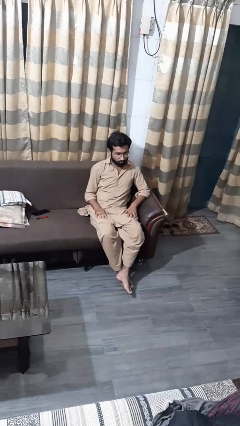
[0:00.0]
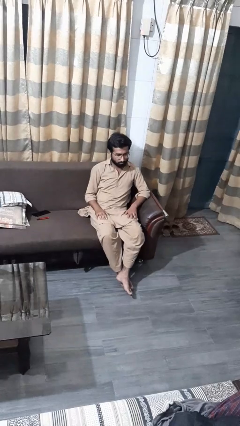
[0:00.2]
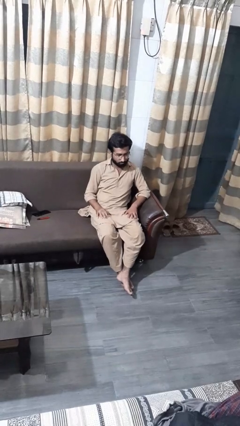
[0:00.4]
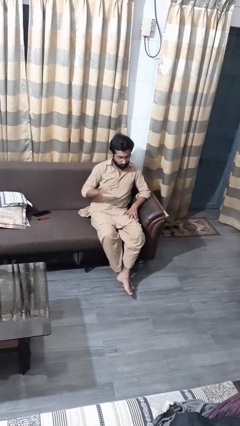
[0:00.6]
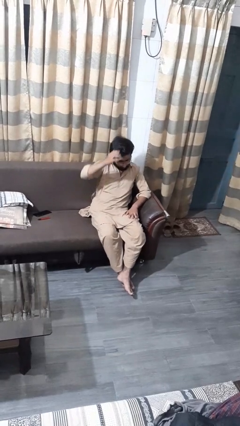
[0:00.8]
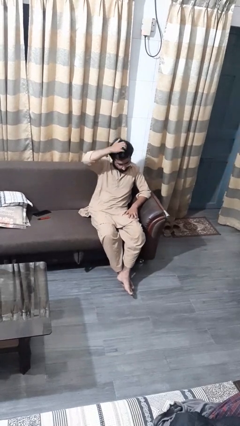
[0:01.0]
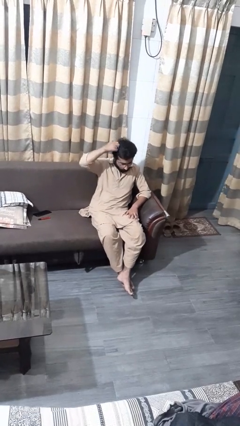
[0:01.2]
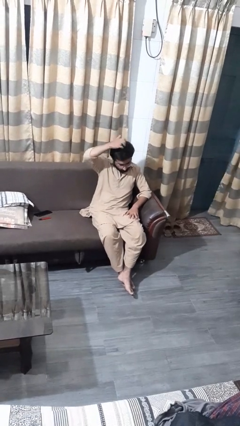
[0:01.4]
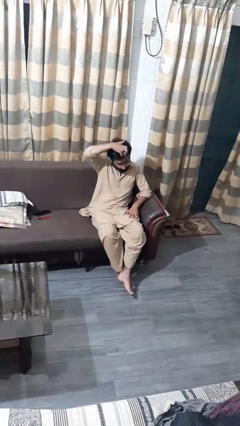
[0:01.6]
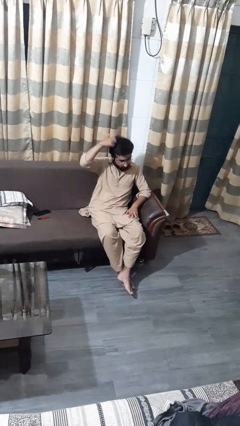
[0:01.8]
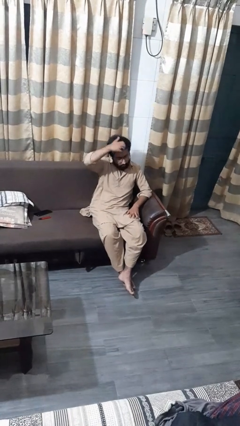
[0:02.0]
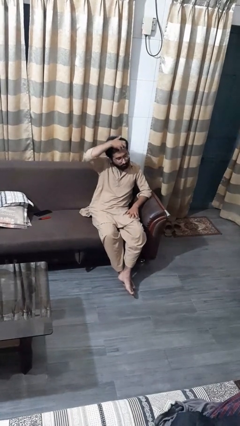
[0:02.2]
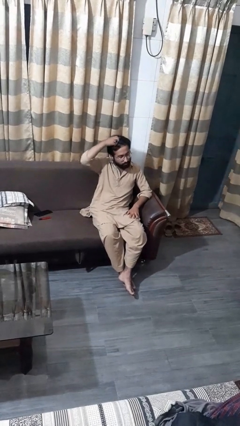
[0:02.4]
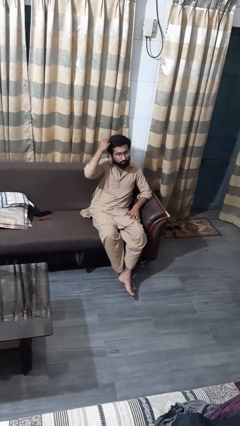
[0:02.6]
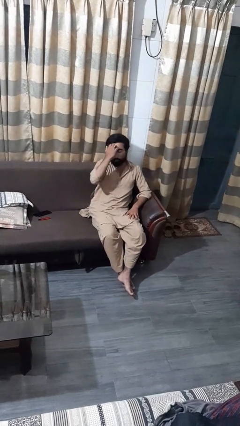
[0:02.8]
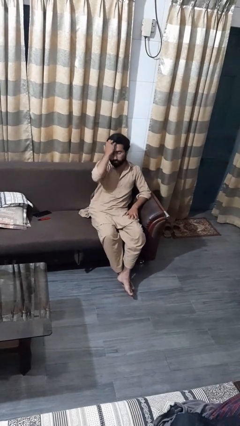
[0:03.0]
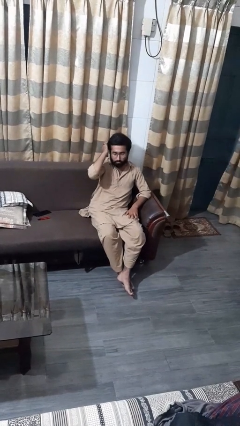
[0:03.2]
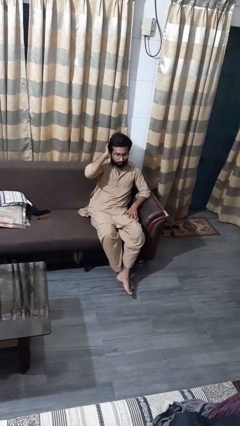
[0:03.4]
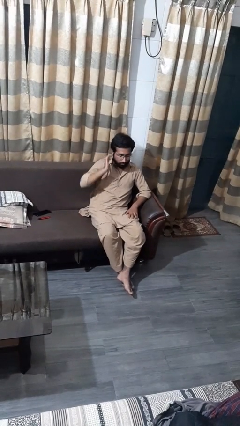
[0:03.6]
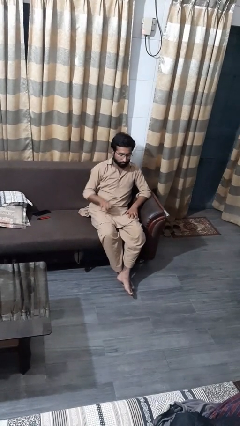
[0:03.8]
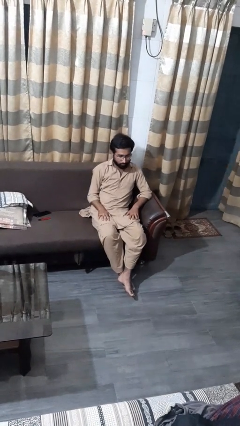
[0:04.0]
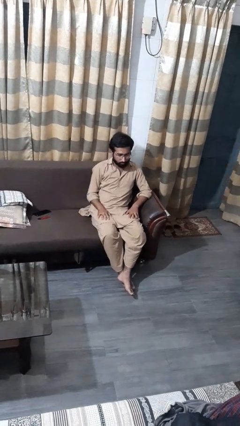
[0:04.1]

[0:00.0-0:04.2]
person strokes hair

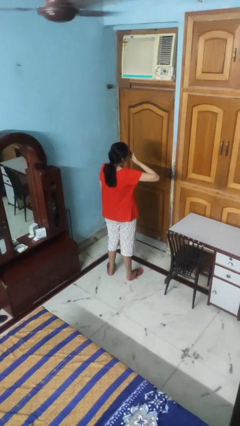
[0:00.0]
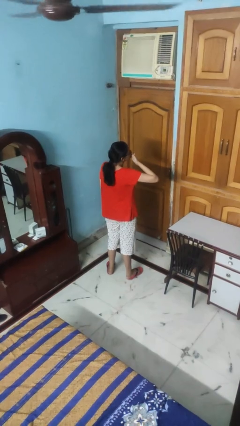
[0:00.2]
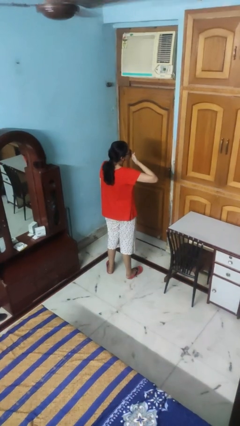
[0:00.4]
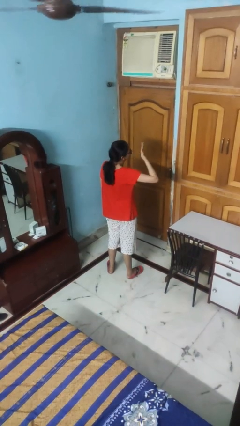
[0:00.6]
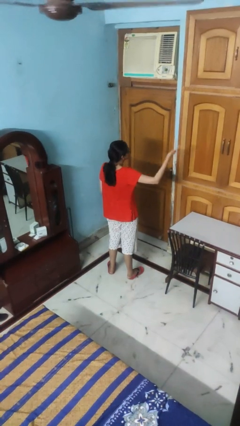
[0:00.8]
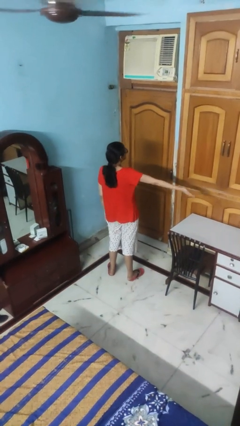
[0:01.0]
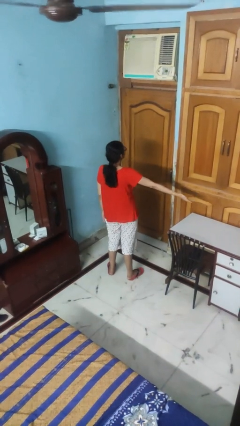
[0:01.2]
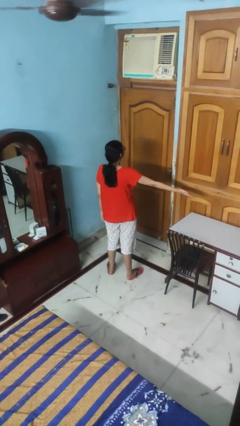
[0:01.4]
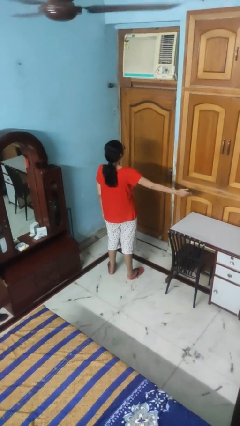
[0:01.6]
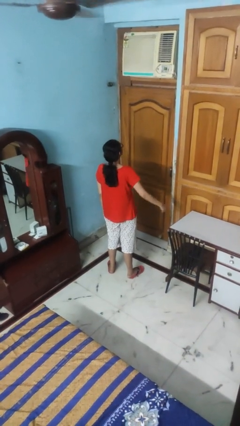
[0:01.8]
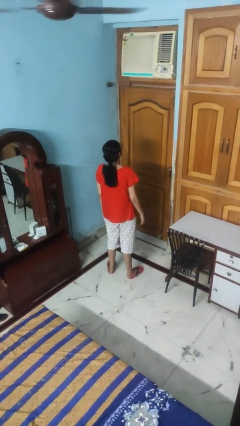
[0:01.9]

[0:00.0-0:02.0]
person gestures blow kiss

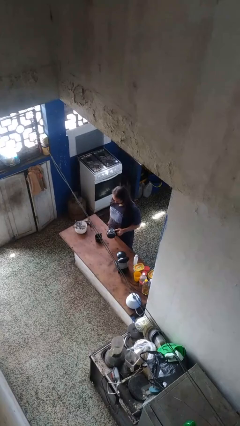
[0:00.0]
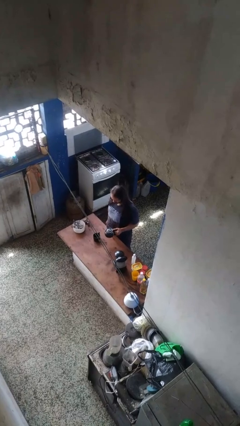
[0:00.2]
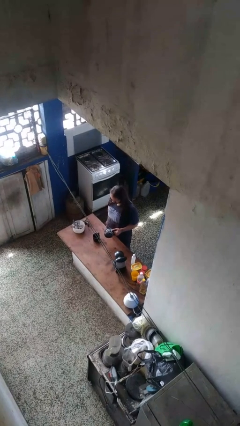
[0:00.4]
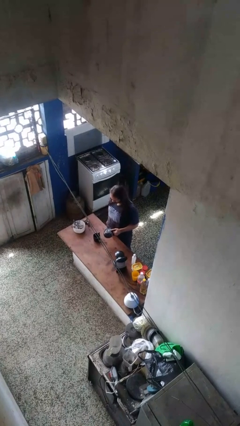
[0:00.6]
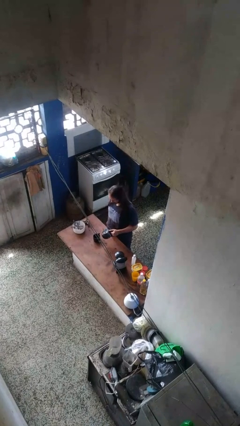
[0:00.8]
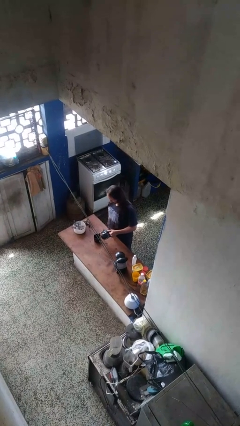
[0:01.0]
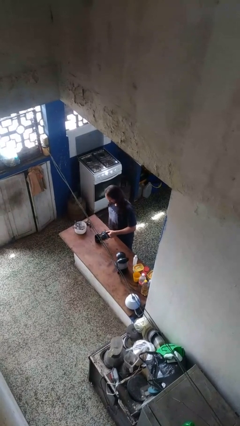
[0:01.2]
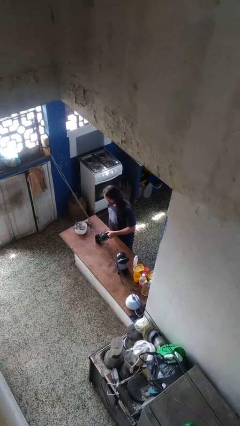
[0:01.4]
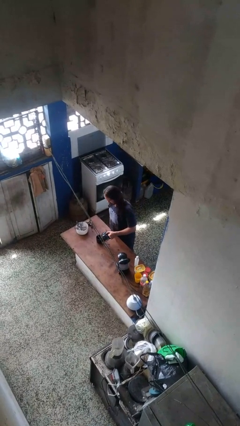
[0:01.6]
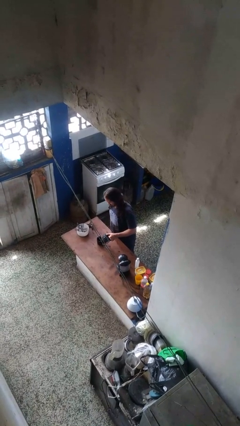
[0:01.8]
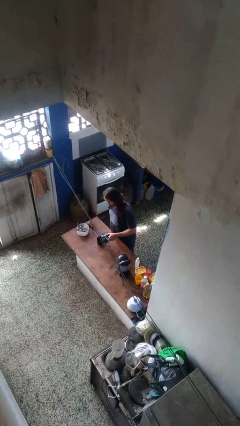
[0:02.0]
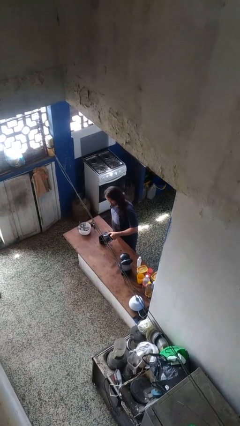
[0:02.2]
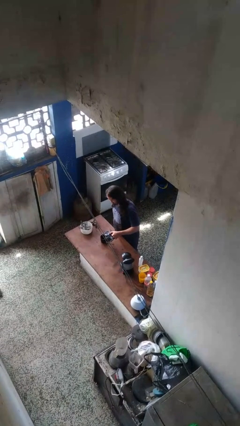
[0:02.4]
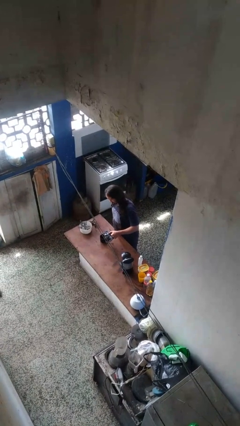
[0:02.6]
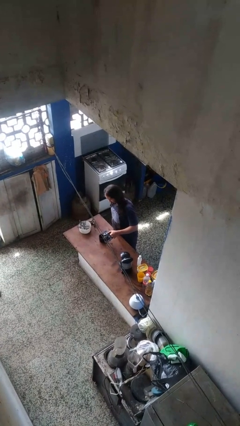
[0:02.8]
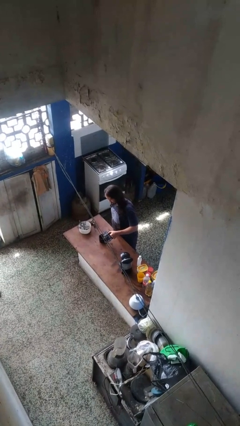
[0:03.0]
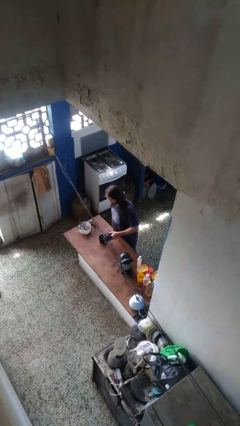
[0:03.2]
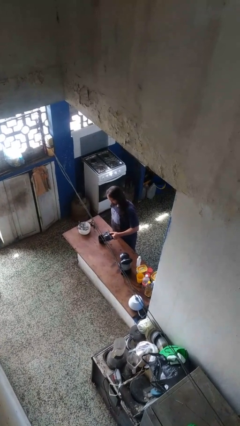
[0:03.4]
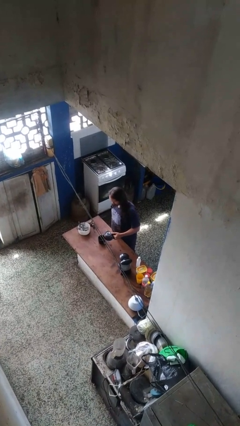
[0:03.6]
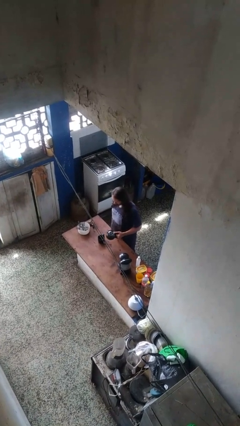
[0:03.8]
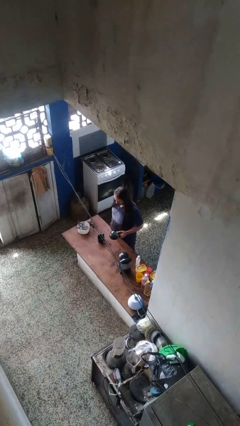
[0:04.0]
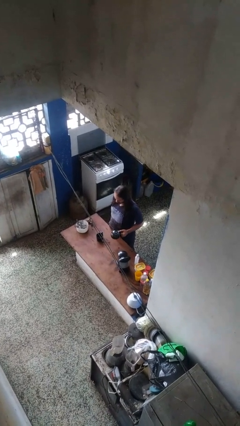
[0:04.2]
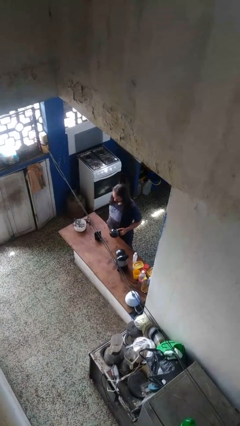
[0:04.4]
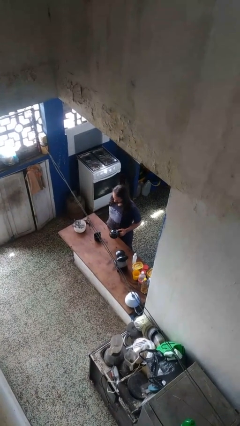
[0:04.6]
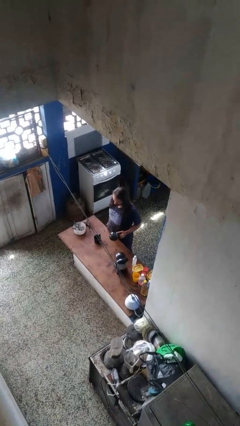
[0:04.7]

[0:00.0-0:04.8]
person pours coffee into mug

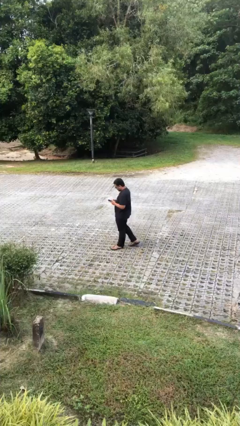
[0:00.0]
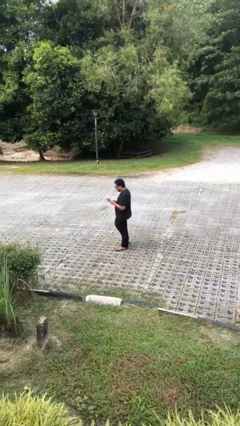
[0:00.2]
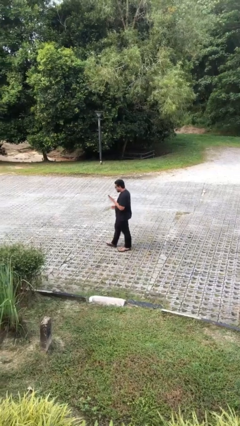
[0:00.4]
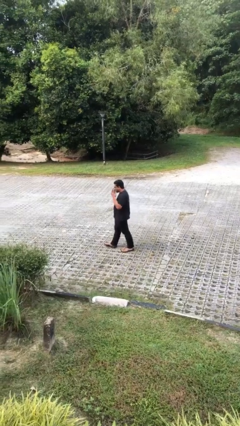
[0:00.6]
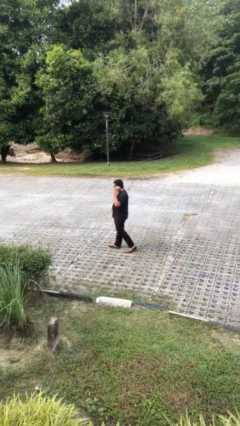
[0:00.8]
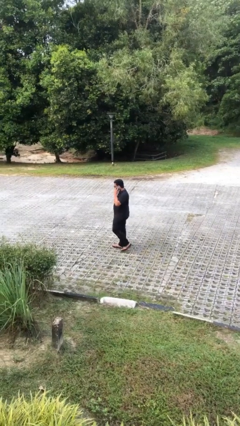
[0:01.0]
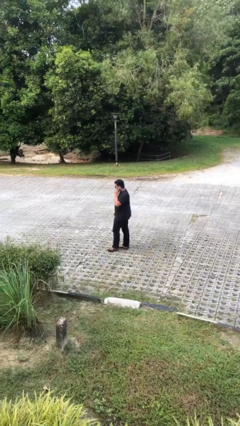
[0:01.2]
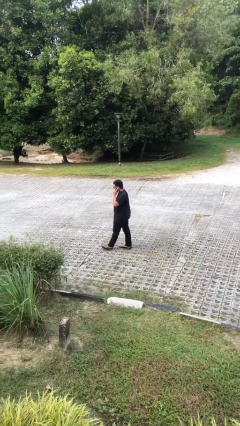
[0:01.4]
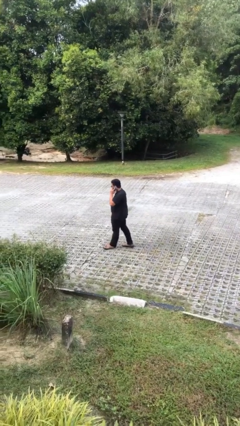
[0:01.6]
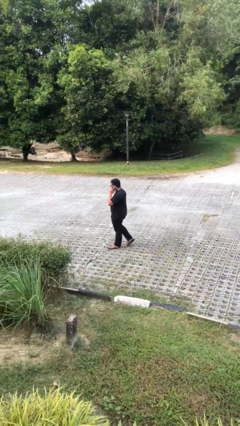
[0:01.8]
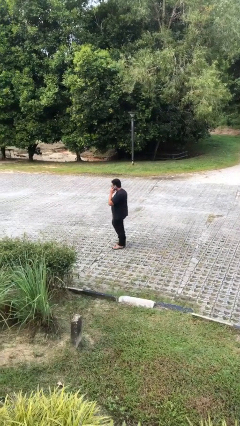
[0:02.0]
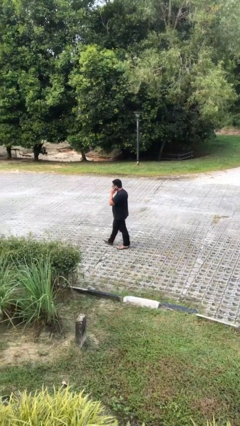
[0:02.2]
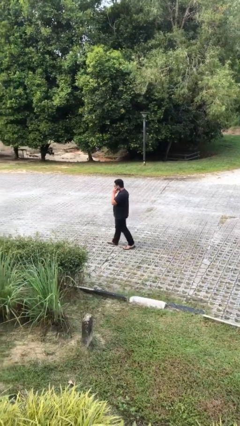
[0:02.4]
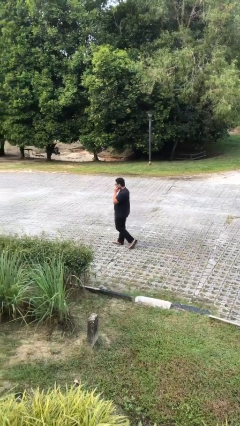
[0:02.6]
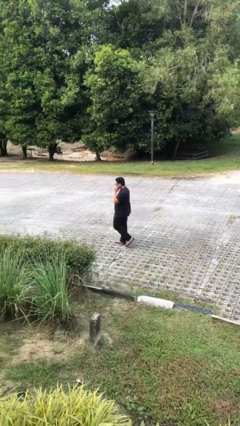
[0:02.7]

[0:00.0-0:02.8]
person talks on phone

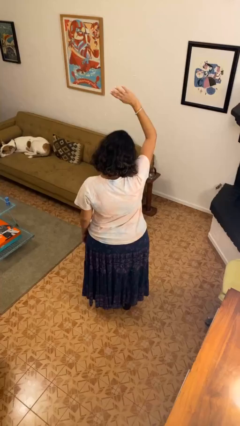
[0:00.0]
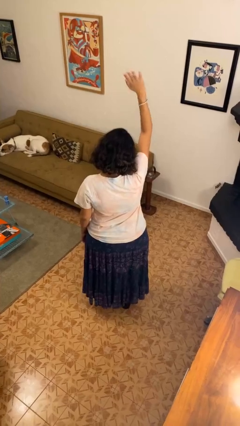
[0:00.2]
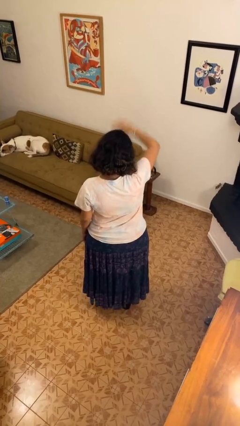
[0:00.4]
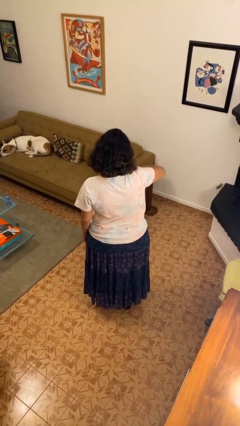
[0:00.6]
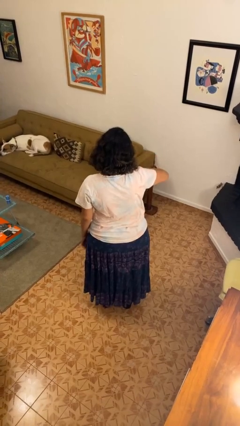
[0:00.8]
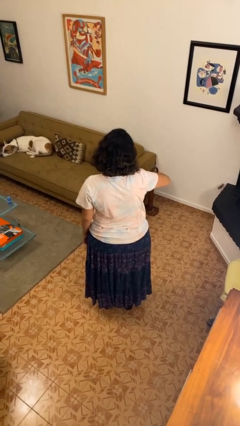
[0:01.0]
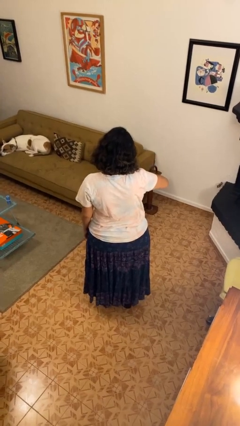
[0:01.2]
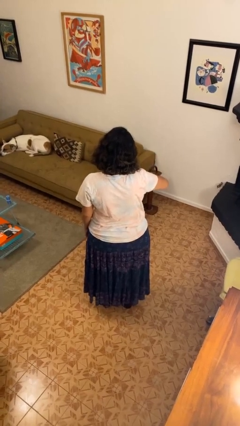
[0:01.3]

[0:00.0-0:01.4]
person gestures swipe down

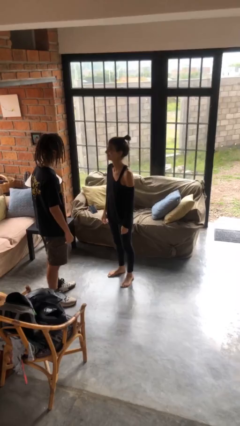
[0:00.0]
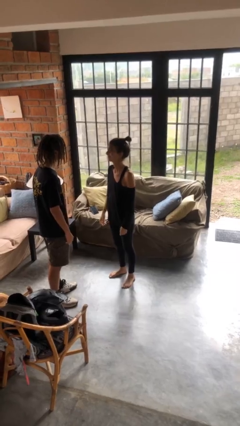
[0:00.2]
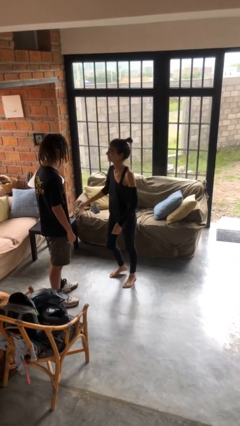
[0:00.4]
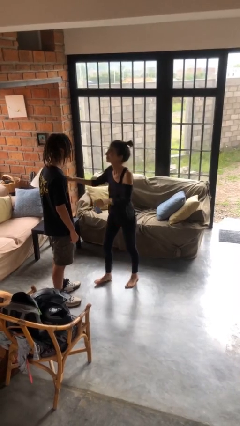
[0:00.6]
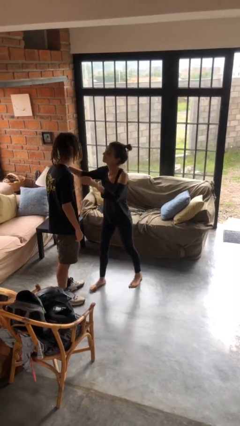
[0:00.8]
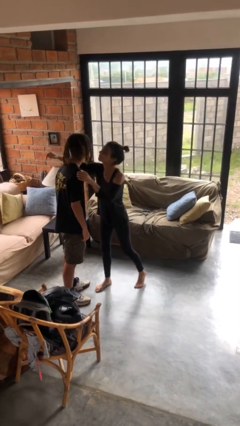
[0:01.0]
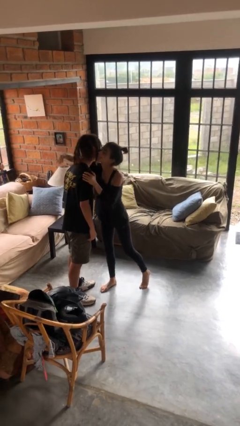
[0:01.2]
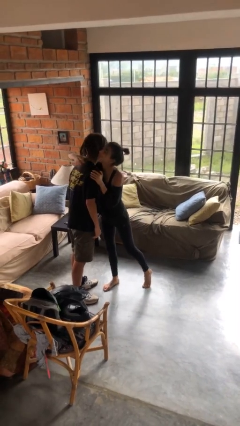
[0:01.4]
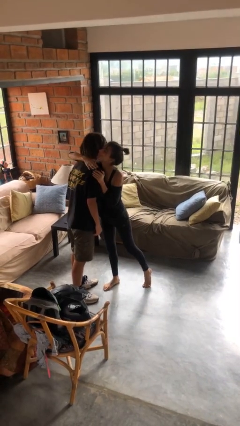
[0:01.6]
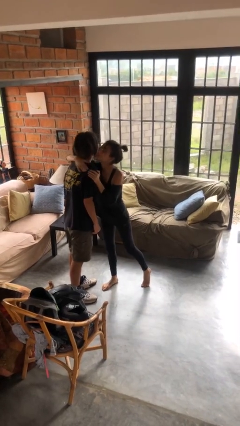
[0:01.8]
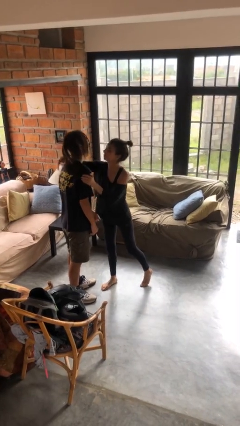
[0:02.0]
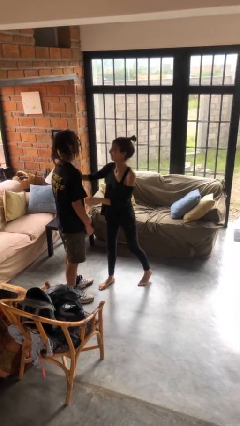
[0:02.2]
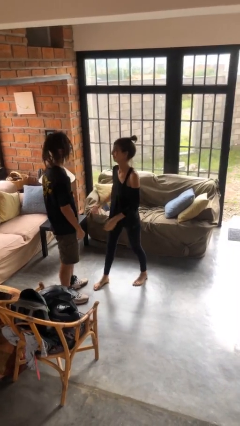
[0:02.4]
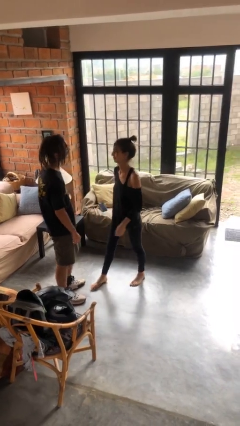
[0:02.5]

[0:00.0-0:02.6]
person kisses cheek of person
